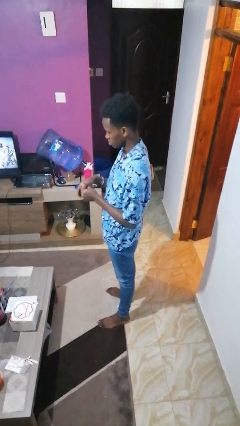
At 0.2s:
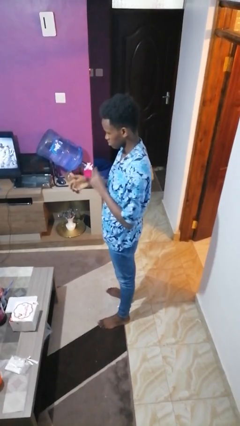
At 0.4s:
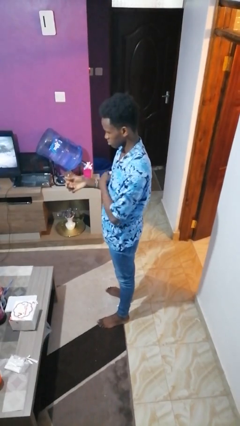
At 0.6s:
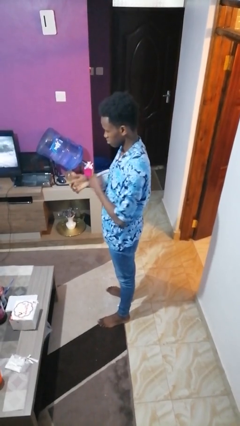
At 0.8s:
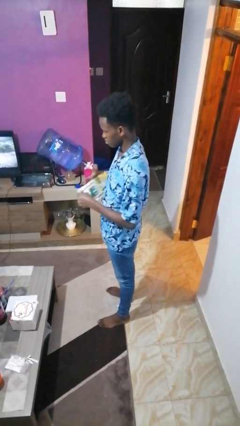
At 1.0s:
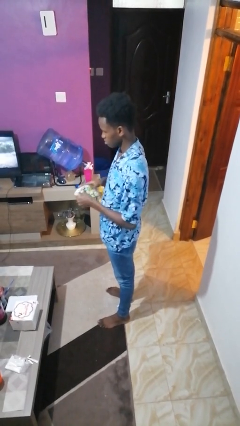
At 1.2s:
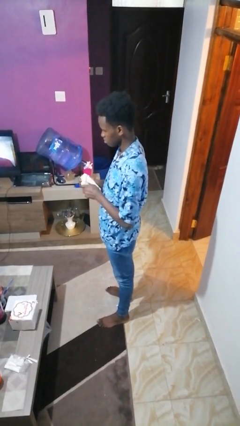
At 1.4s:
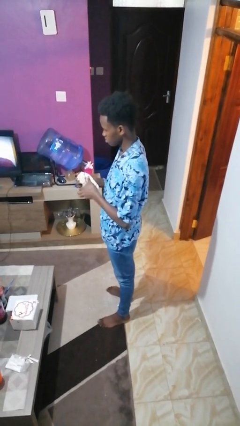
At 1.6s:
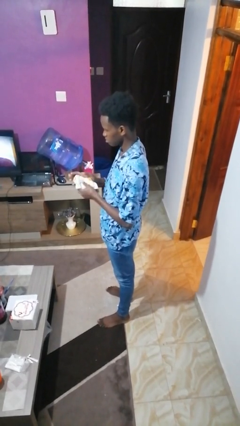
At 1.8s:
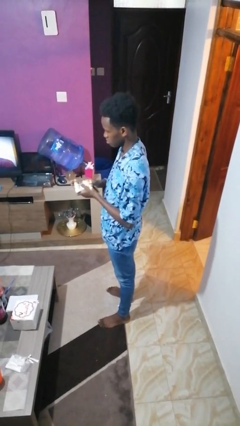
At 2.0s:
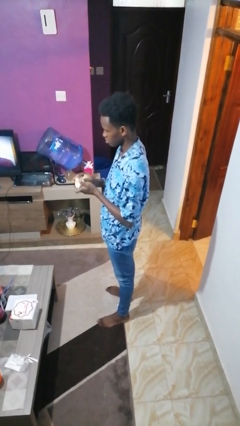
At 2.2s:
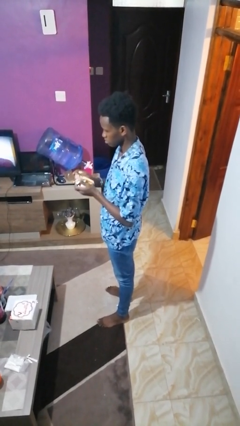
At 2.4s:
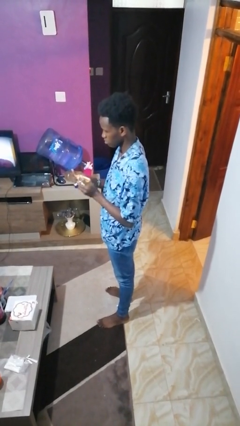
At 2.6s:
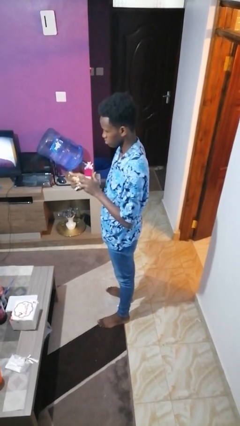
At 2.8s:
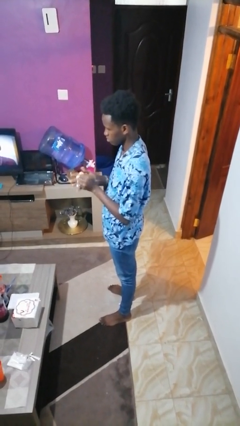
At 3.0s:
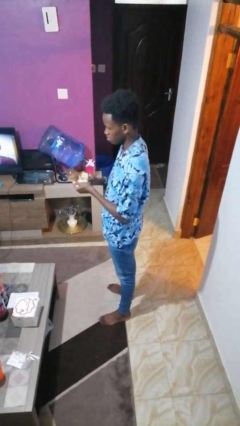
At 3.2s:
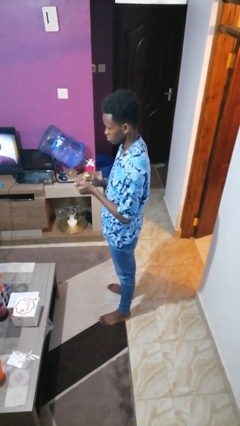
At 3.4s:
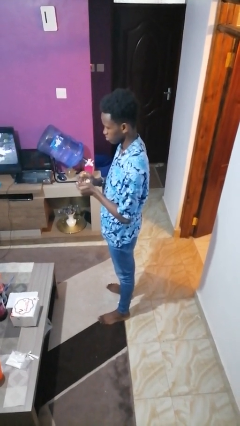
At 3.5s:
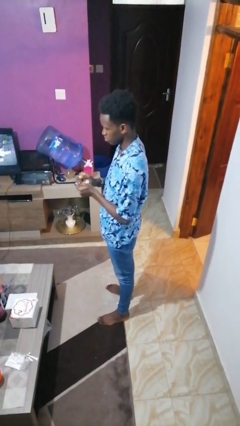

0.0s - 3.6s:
person crumples paper

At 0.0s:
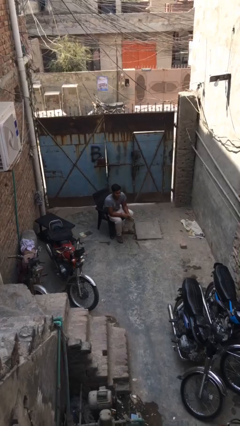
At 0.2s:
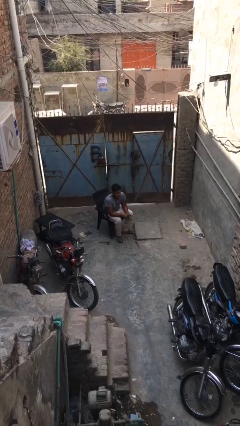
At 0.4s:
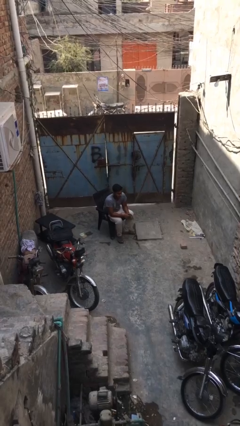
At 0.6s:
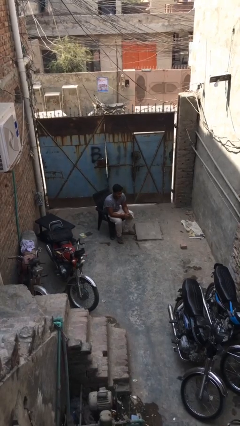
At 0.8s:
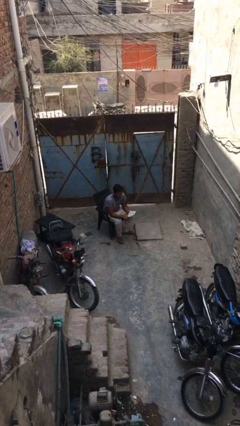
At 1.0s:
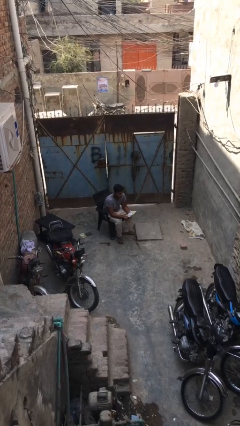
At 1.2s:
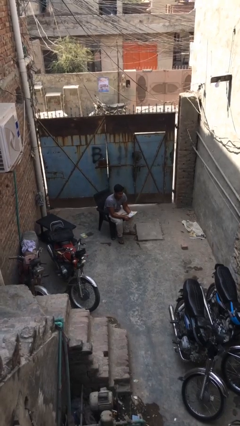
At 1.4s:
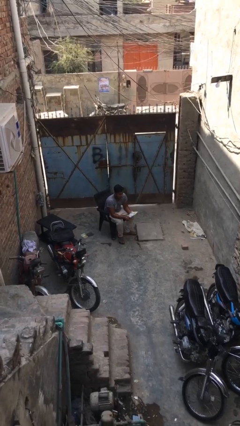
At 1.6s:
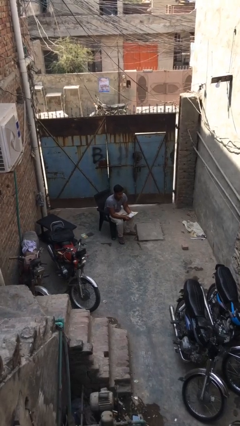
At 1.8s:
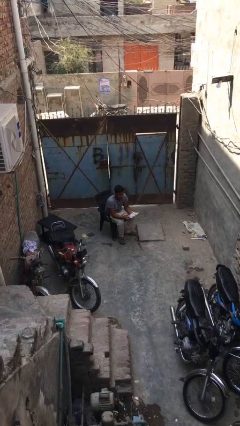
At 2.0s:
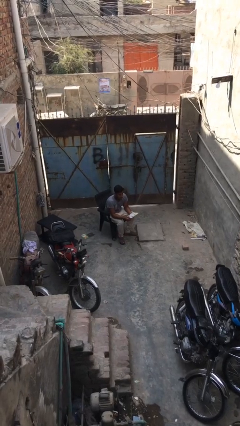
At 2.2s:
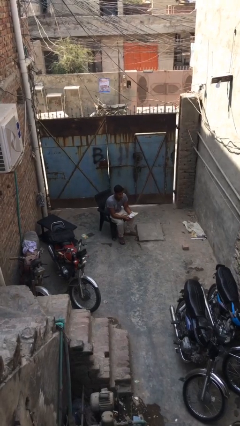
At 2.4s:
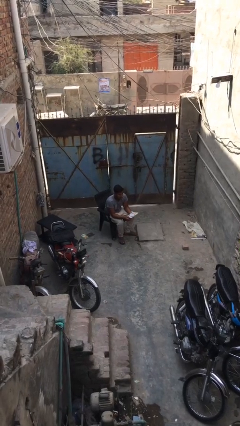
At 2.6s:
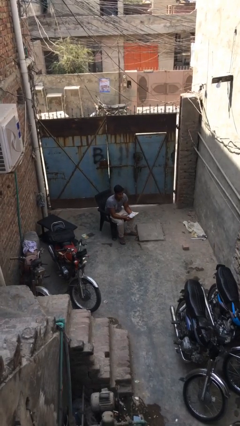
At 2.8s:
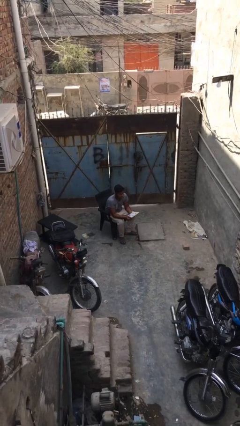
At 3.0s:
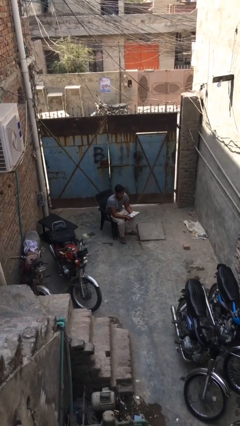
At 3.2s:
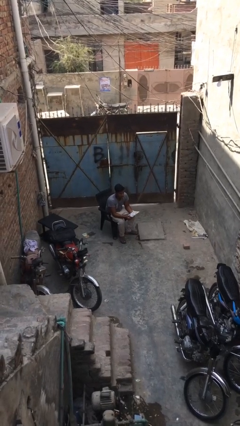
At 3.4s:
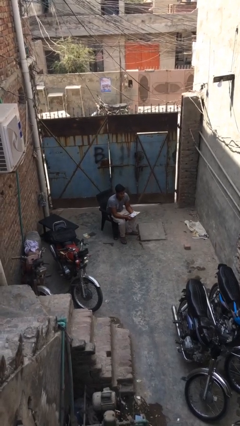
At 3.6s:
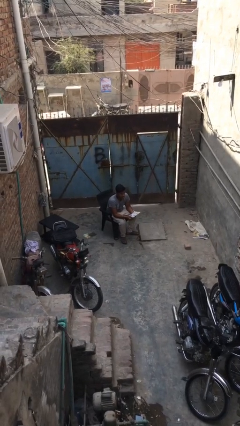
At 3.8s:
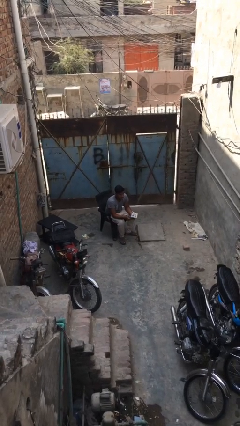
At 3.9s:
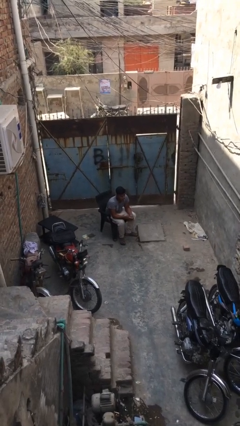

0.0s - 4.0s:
person reads document

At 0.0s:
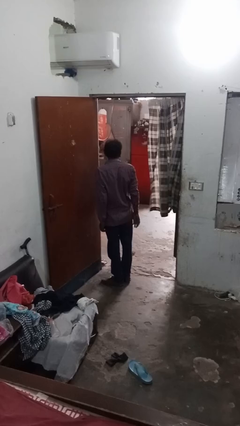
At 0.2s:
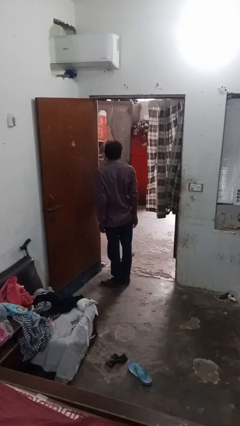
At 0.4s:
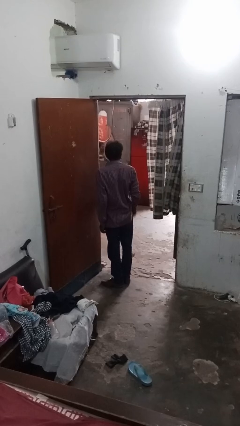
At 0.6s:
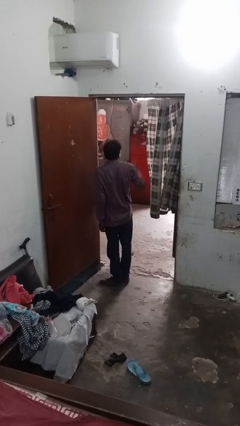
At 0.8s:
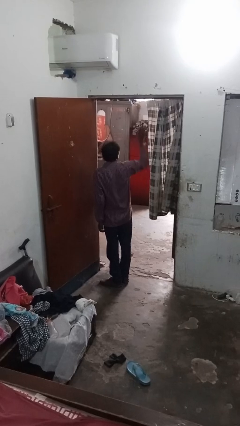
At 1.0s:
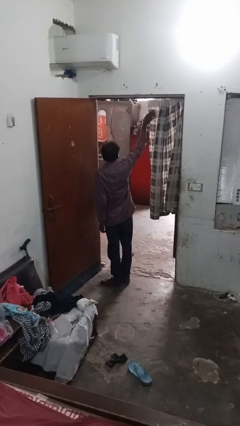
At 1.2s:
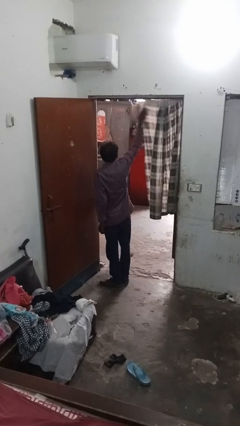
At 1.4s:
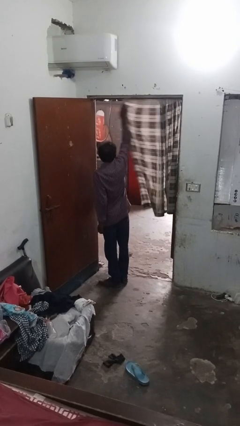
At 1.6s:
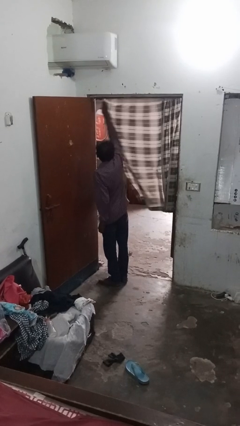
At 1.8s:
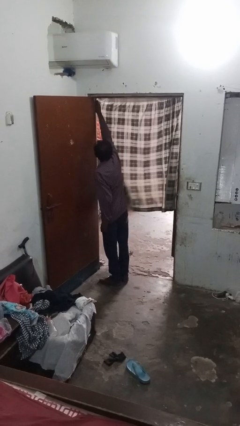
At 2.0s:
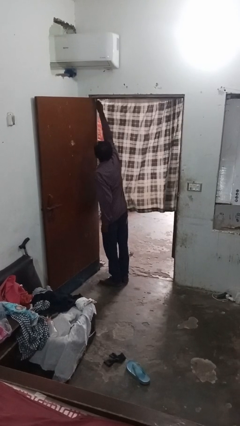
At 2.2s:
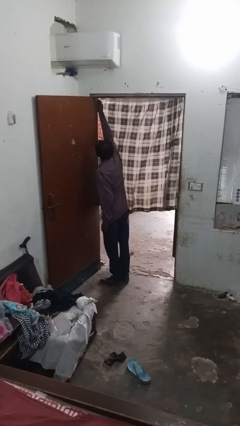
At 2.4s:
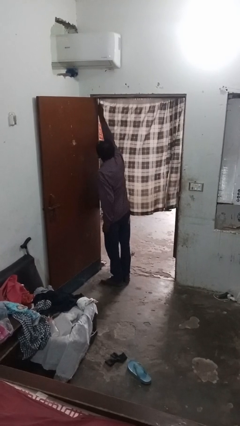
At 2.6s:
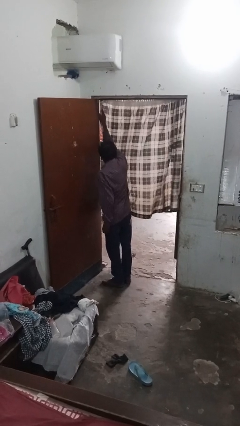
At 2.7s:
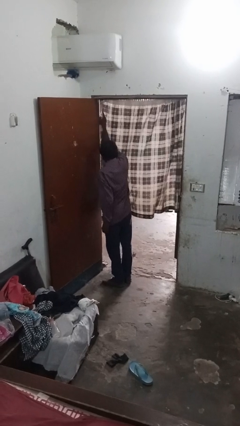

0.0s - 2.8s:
person closes curtains

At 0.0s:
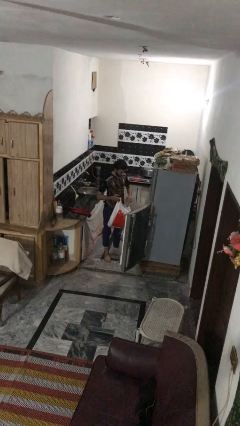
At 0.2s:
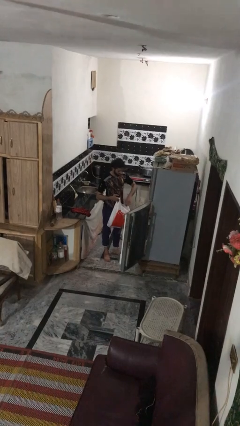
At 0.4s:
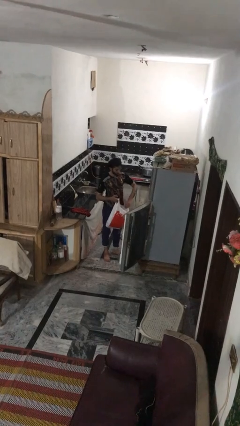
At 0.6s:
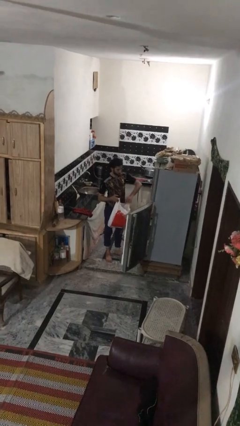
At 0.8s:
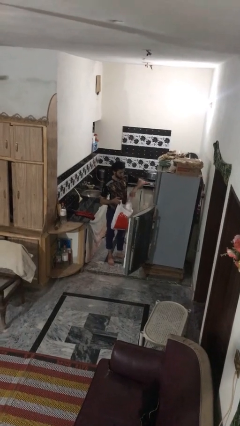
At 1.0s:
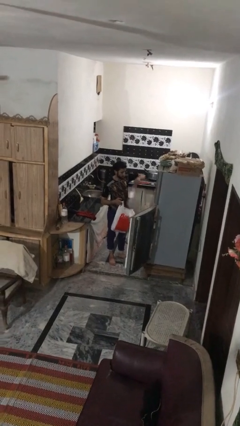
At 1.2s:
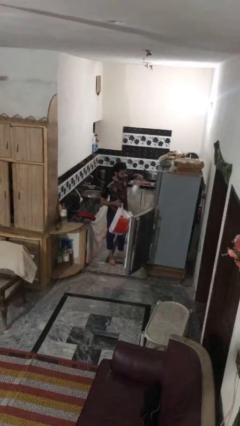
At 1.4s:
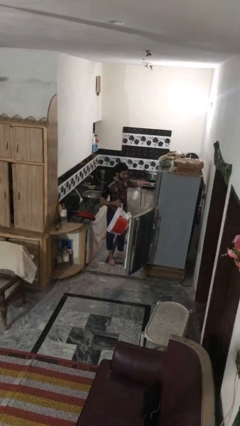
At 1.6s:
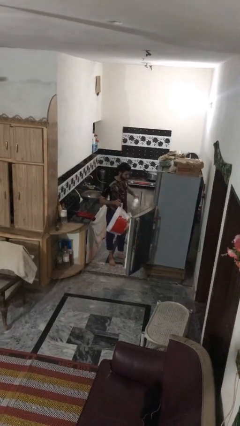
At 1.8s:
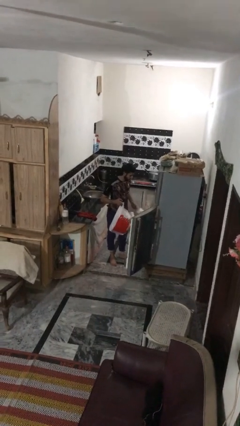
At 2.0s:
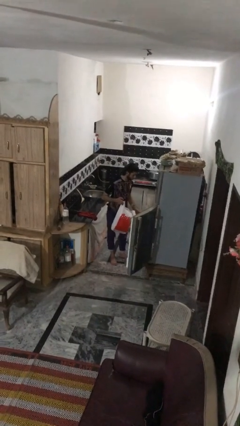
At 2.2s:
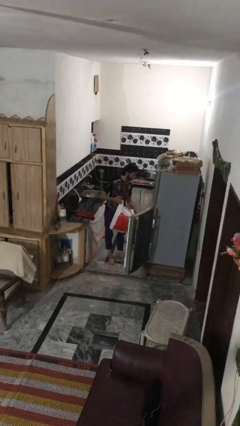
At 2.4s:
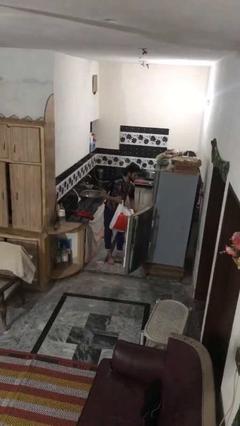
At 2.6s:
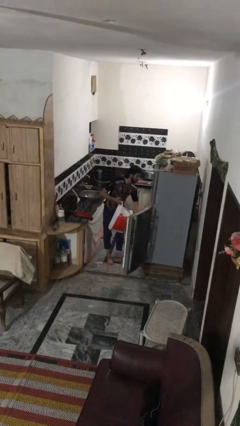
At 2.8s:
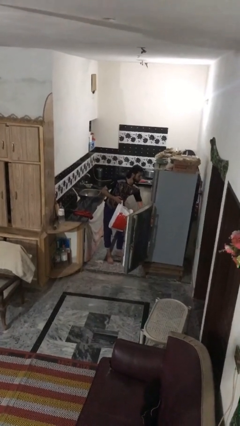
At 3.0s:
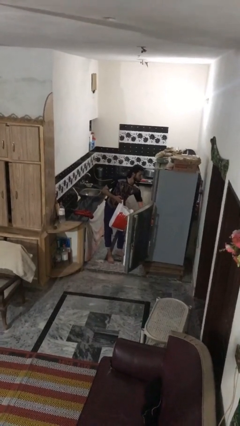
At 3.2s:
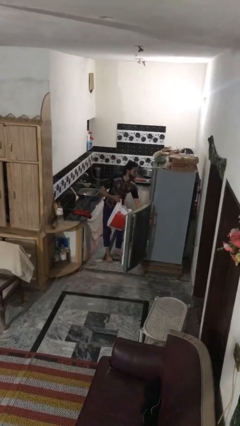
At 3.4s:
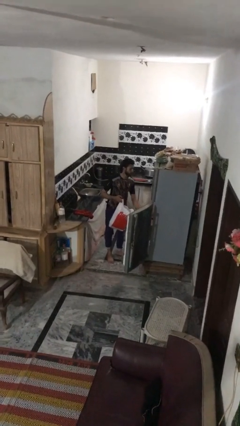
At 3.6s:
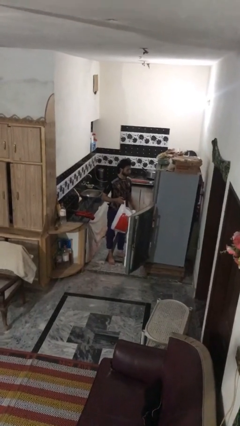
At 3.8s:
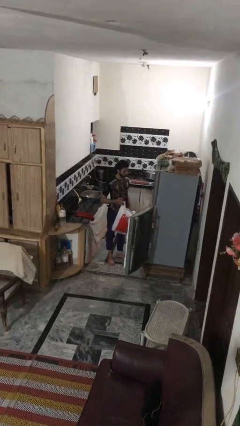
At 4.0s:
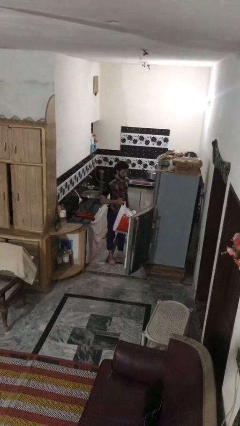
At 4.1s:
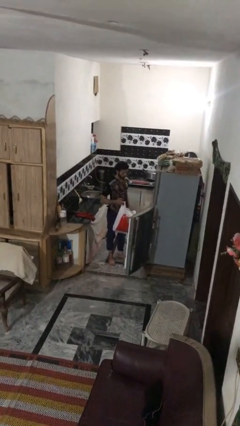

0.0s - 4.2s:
person loads groceries into refrigerator

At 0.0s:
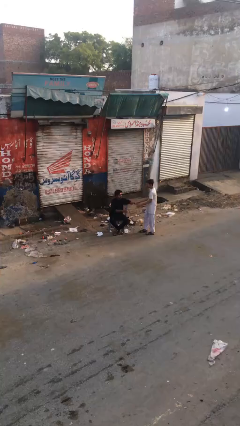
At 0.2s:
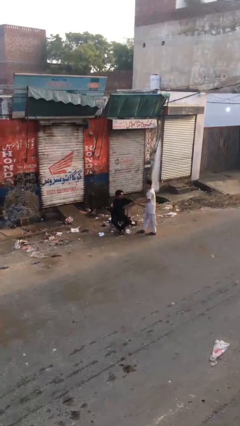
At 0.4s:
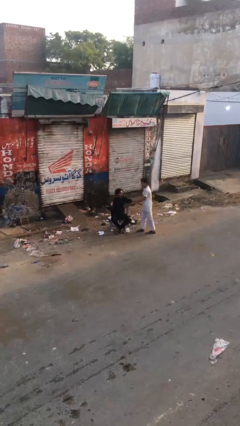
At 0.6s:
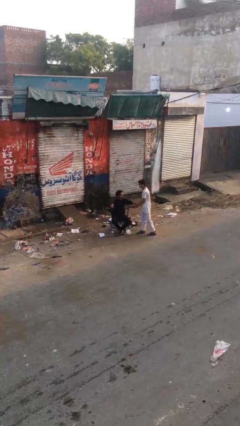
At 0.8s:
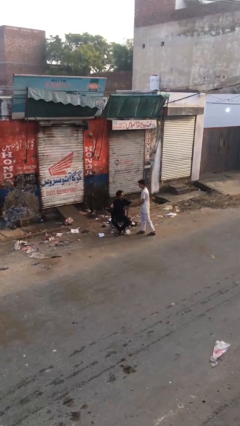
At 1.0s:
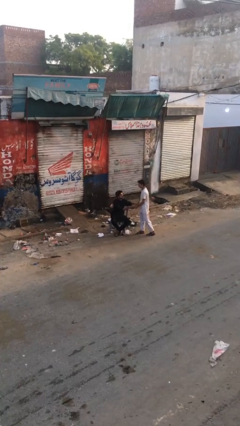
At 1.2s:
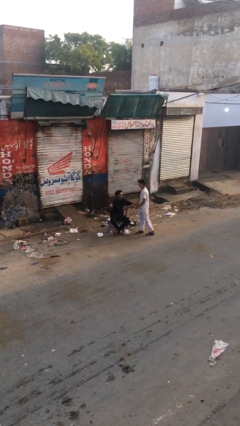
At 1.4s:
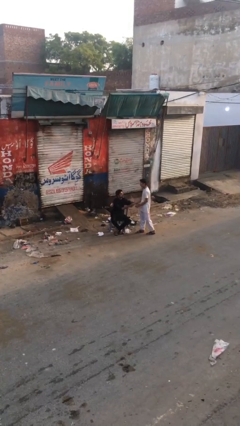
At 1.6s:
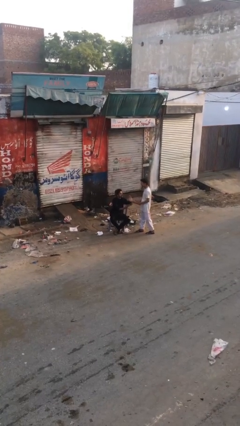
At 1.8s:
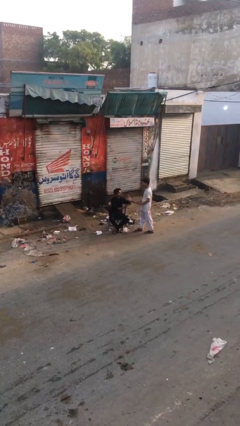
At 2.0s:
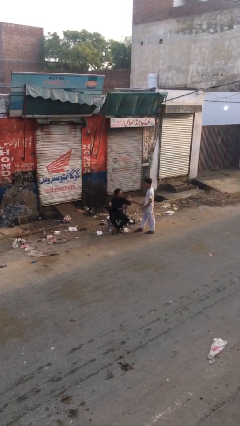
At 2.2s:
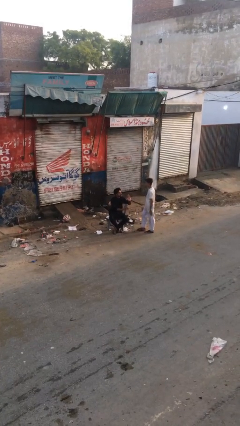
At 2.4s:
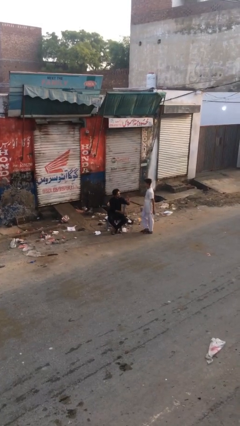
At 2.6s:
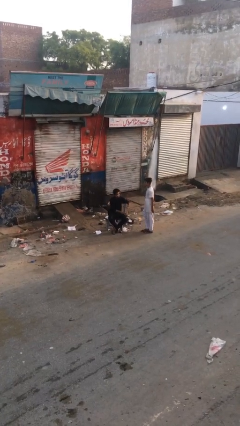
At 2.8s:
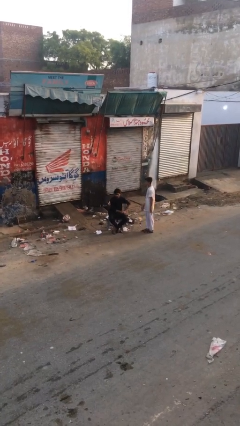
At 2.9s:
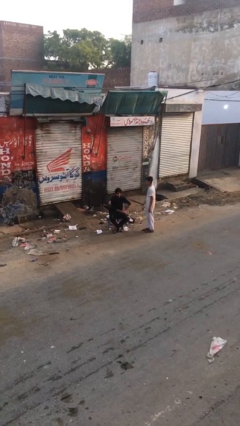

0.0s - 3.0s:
person shakes hand
